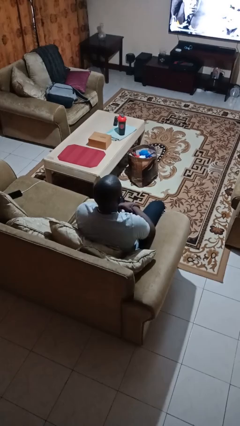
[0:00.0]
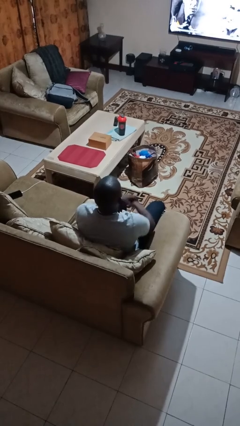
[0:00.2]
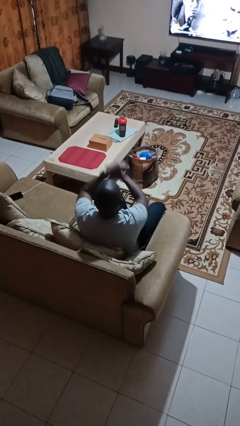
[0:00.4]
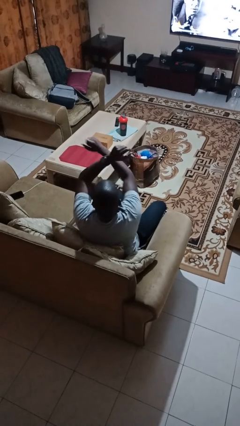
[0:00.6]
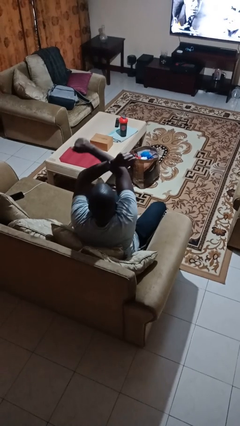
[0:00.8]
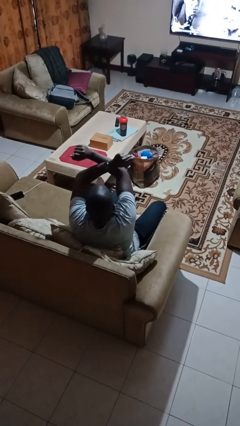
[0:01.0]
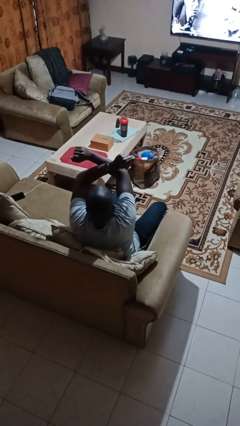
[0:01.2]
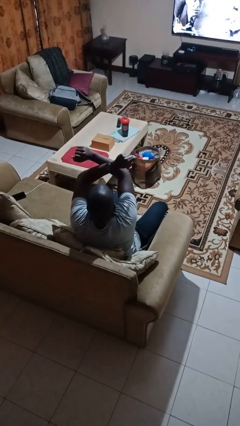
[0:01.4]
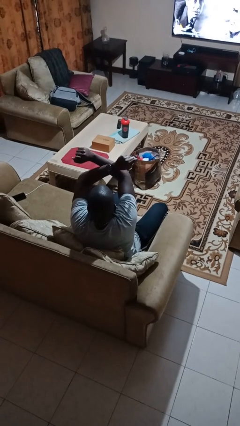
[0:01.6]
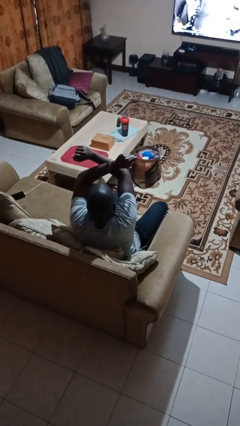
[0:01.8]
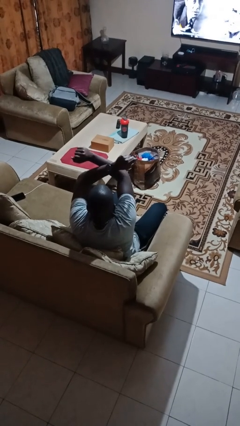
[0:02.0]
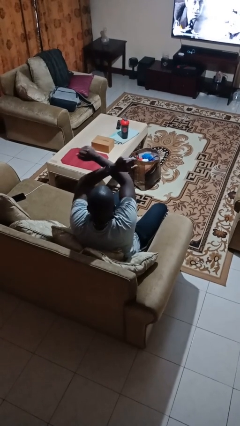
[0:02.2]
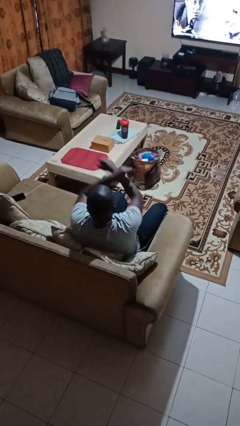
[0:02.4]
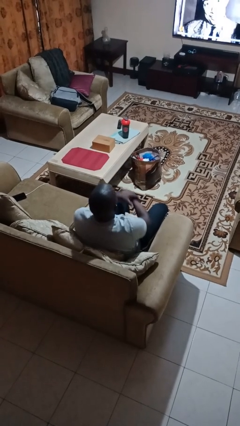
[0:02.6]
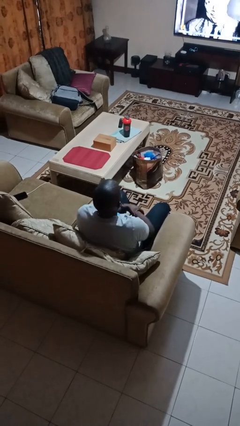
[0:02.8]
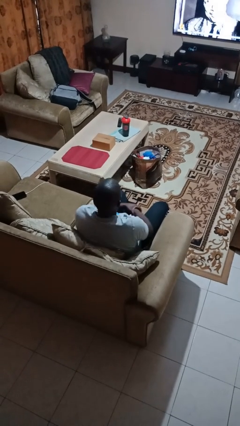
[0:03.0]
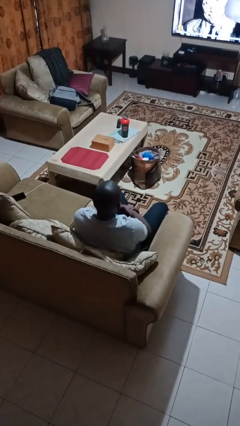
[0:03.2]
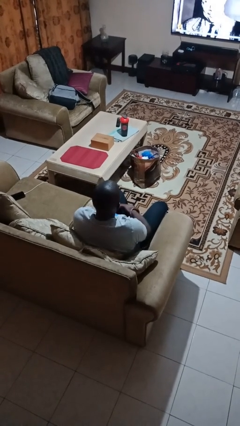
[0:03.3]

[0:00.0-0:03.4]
person gestures arms x

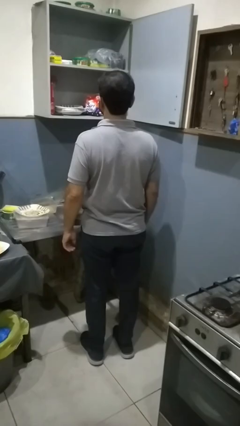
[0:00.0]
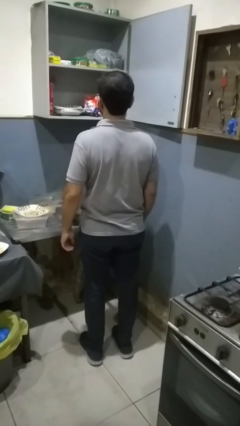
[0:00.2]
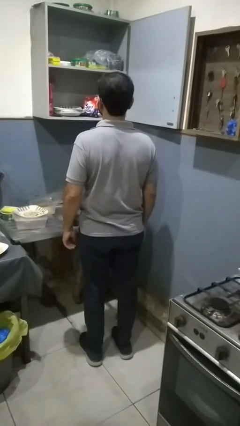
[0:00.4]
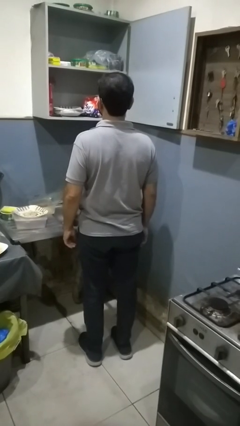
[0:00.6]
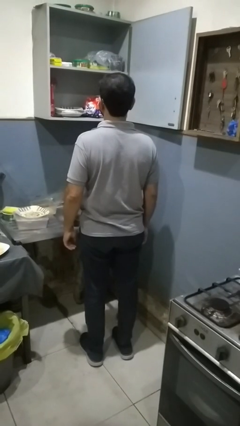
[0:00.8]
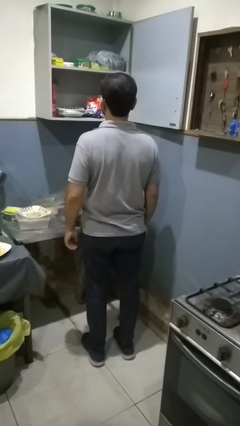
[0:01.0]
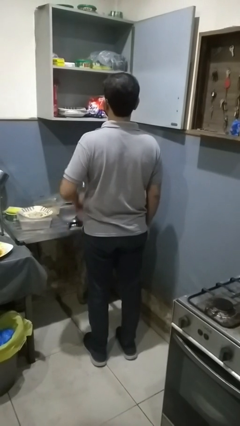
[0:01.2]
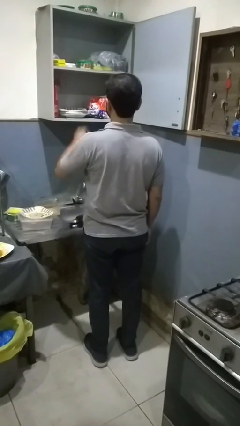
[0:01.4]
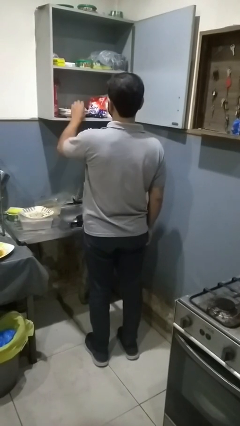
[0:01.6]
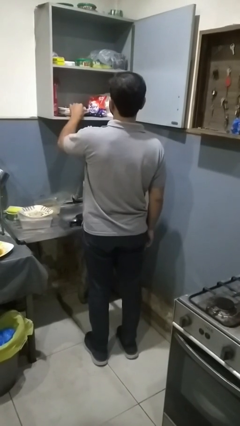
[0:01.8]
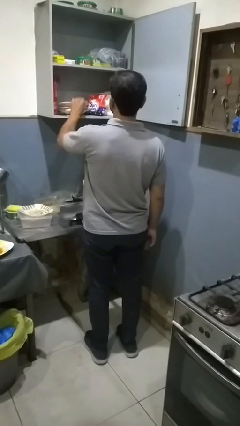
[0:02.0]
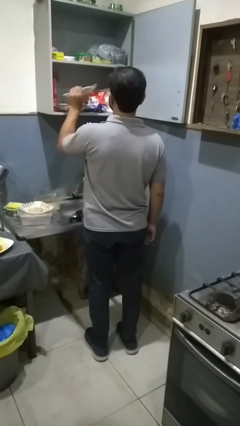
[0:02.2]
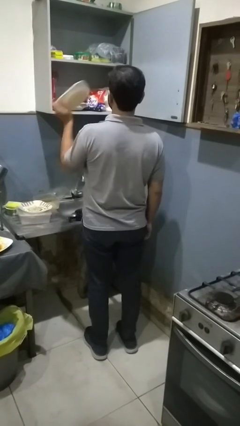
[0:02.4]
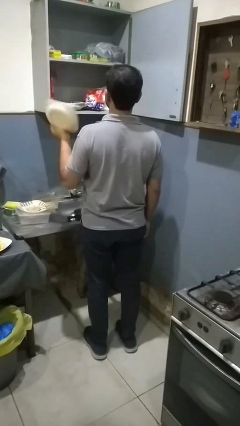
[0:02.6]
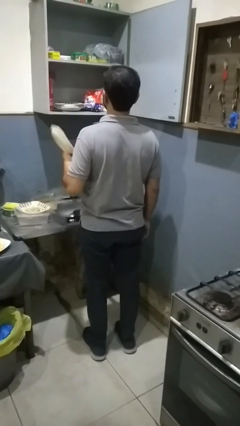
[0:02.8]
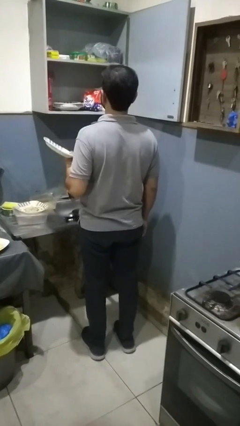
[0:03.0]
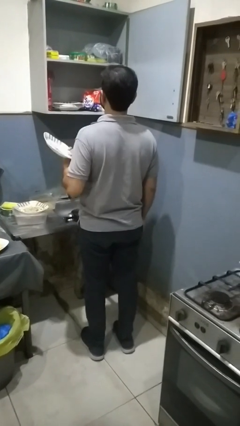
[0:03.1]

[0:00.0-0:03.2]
person takes object from cabinet

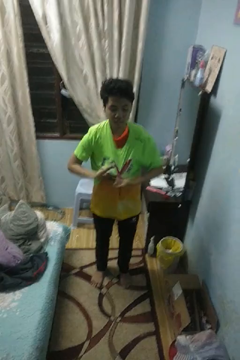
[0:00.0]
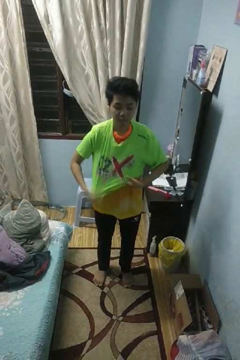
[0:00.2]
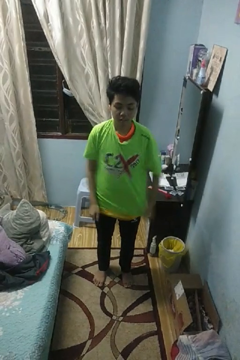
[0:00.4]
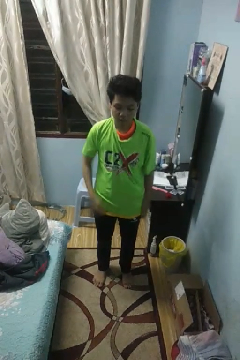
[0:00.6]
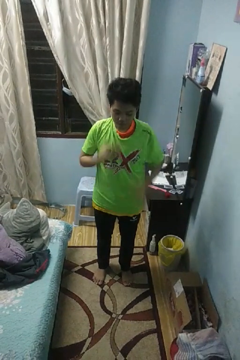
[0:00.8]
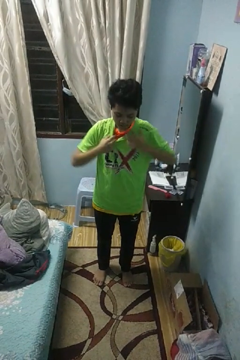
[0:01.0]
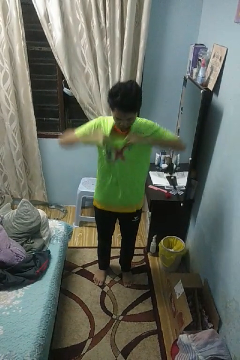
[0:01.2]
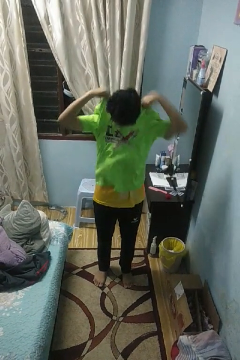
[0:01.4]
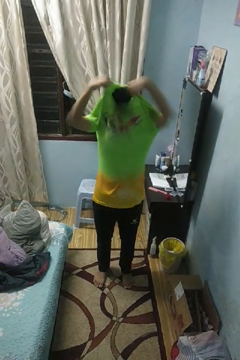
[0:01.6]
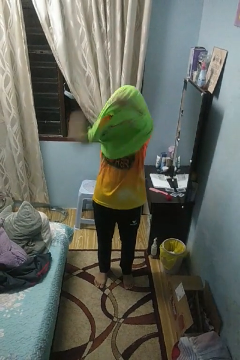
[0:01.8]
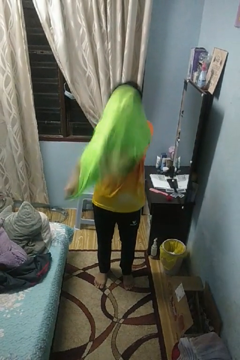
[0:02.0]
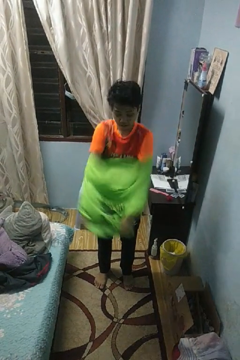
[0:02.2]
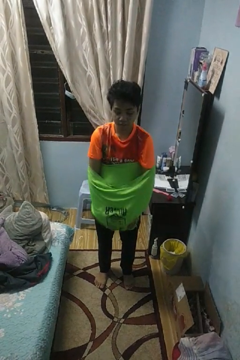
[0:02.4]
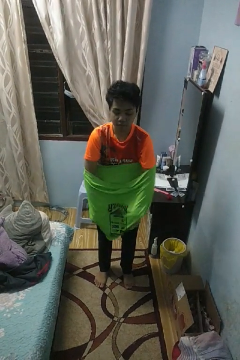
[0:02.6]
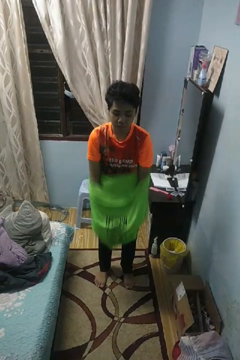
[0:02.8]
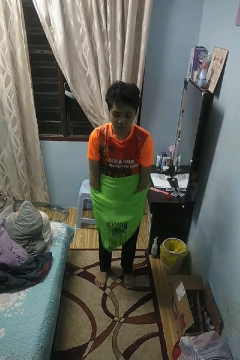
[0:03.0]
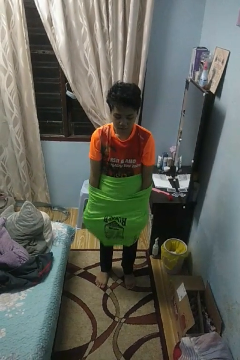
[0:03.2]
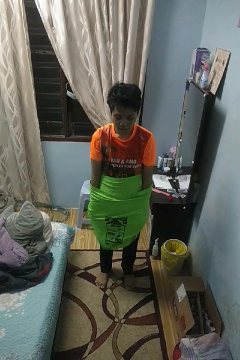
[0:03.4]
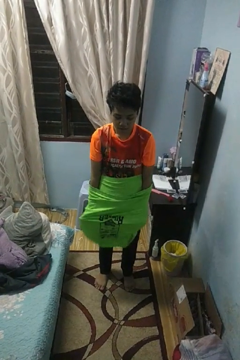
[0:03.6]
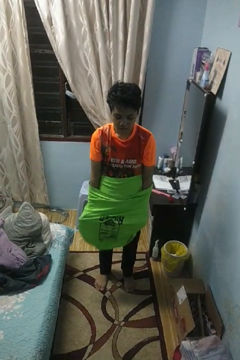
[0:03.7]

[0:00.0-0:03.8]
person takes off shirt

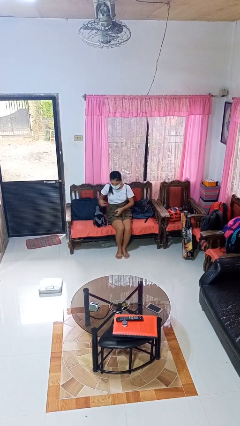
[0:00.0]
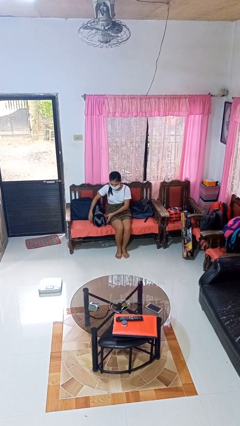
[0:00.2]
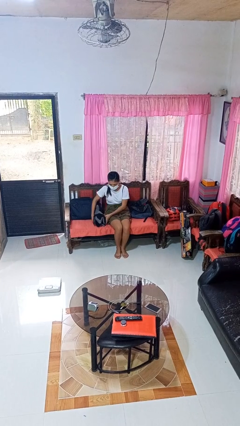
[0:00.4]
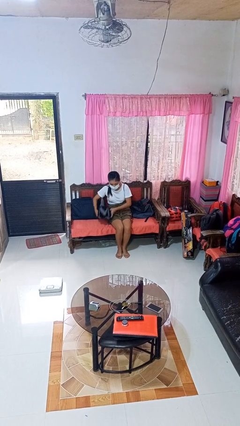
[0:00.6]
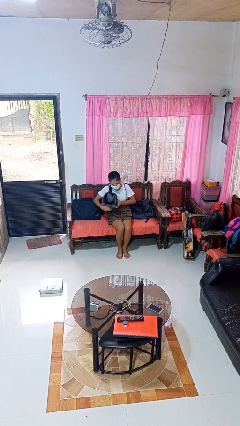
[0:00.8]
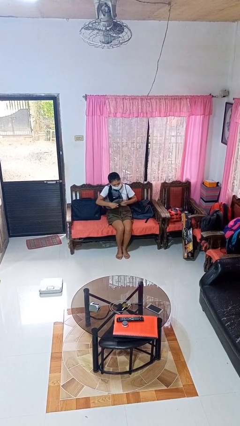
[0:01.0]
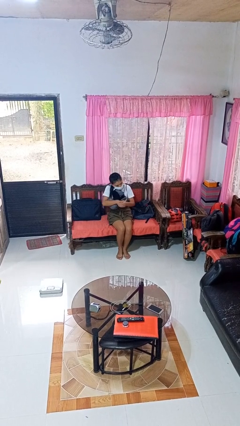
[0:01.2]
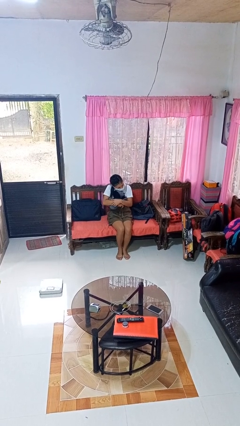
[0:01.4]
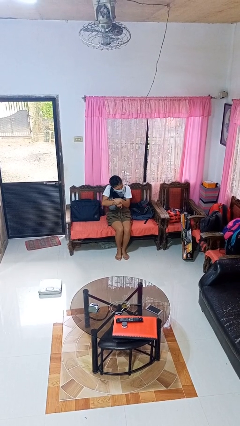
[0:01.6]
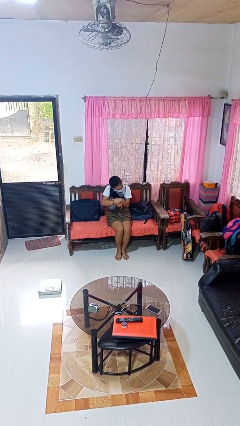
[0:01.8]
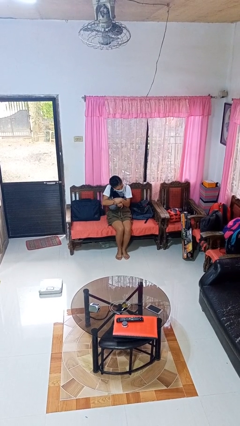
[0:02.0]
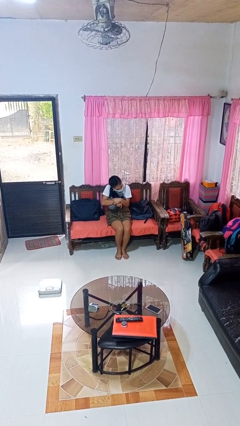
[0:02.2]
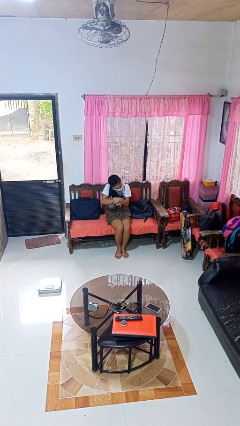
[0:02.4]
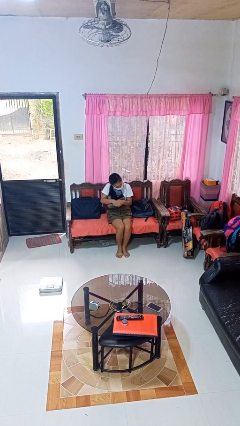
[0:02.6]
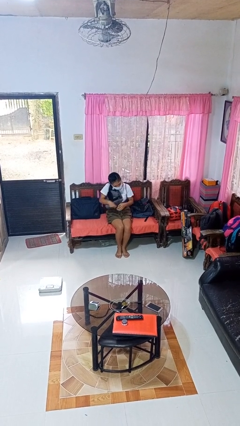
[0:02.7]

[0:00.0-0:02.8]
person hugs stuffed animal

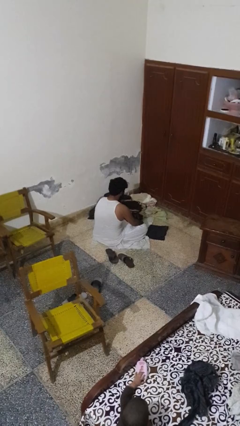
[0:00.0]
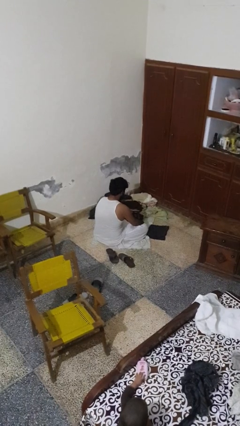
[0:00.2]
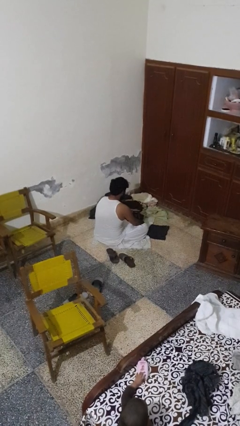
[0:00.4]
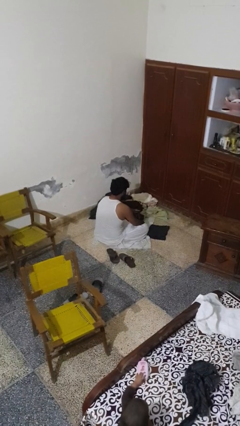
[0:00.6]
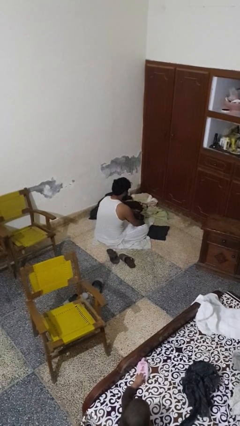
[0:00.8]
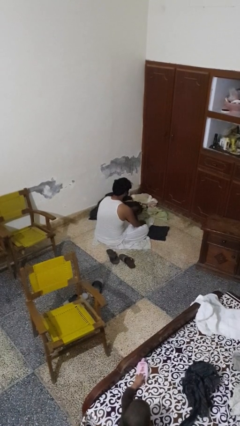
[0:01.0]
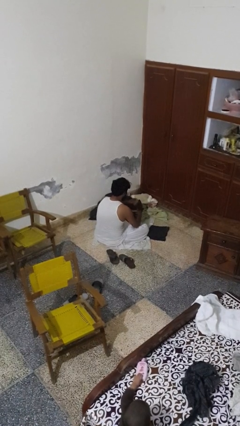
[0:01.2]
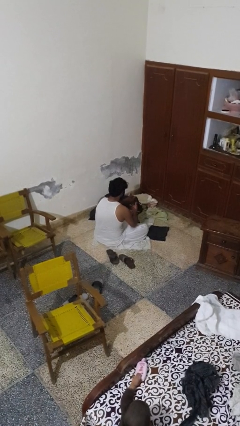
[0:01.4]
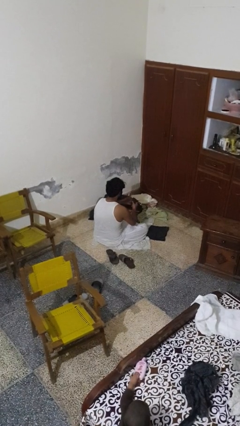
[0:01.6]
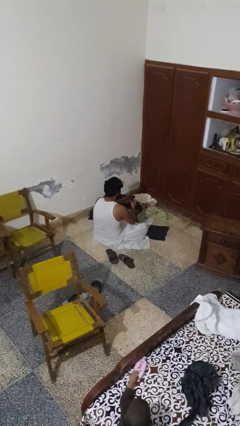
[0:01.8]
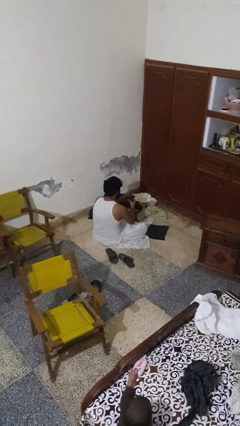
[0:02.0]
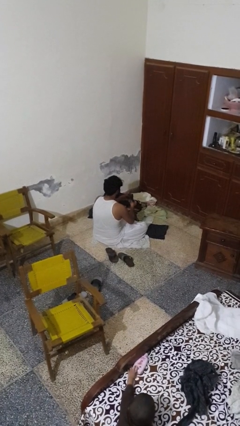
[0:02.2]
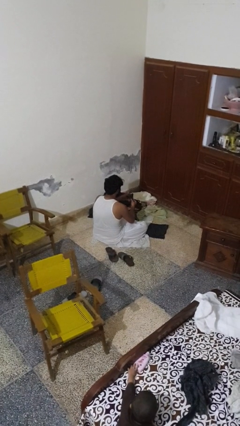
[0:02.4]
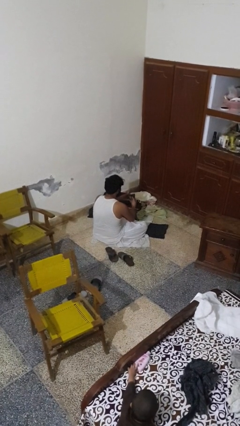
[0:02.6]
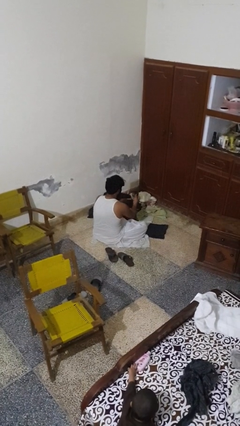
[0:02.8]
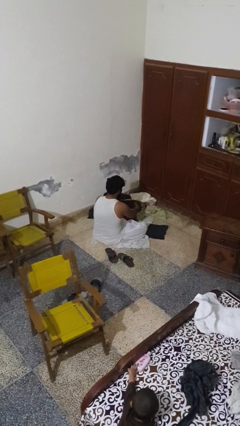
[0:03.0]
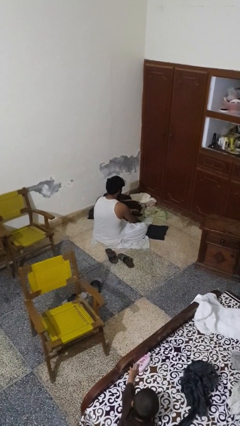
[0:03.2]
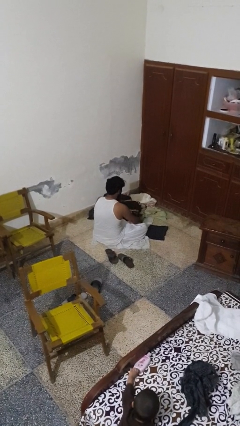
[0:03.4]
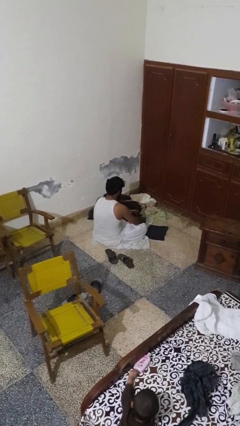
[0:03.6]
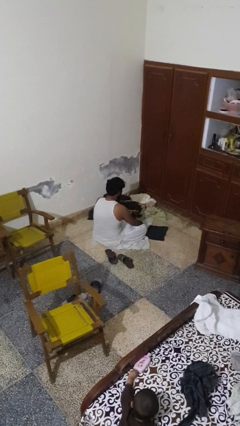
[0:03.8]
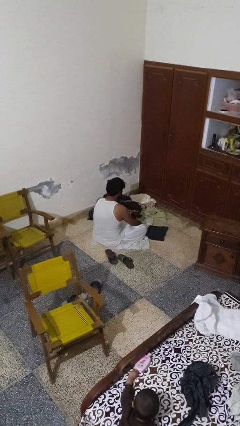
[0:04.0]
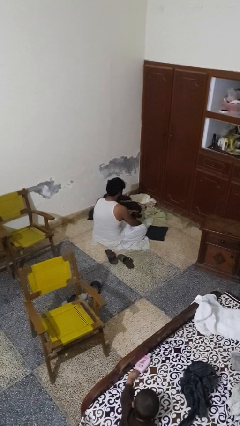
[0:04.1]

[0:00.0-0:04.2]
person folds socks

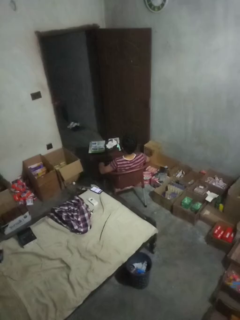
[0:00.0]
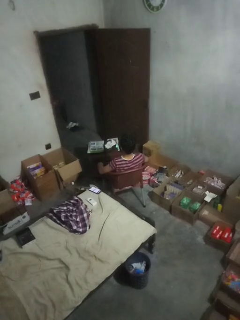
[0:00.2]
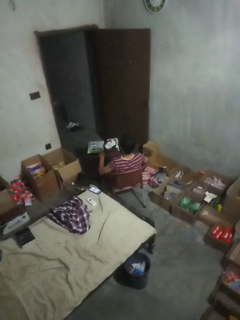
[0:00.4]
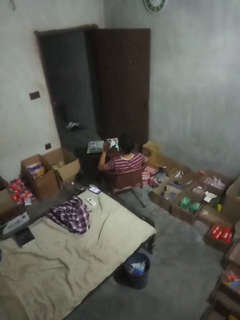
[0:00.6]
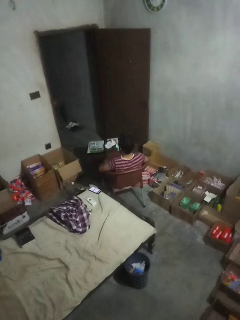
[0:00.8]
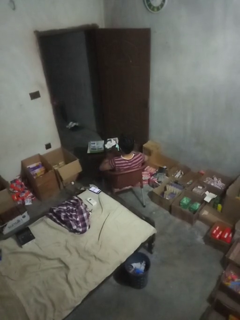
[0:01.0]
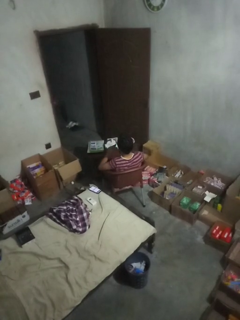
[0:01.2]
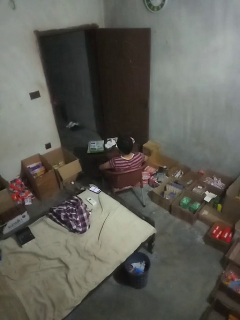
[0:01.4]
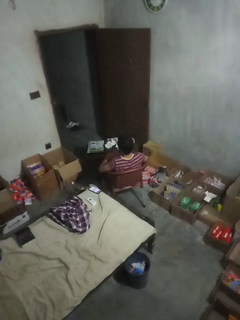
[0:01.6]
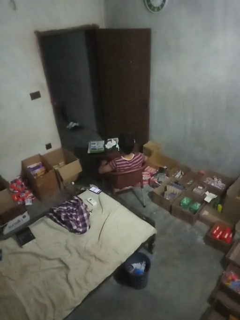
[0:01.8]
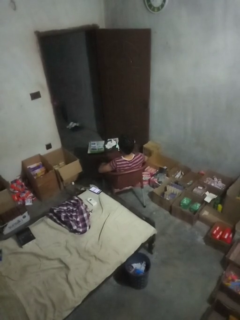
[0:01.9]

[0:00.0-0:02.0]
person slaps hands on thighs
